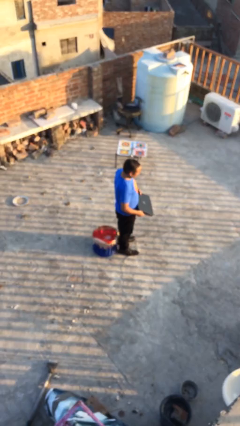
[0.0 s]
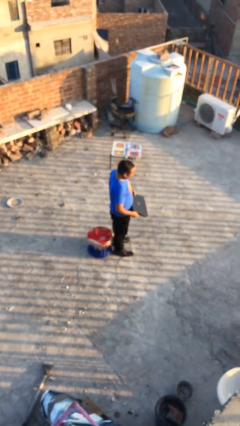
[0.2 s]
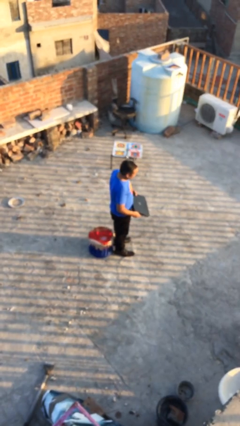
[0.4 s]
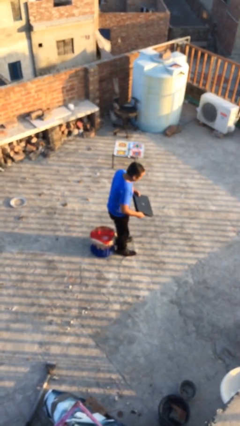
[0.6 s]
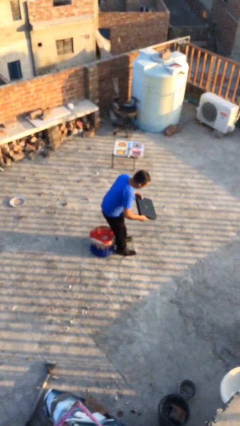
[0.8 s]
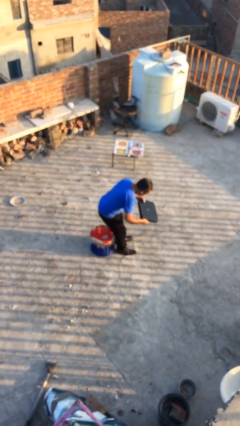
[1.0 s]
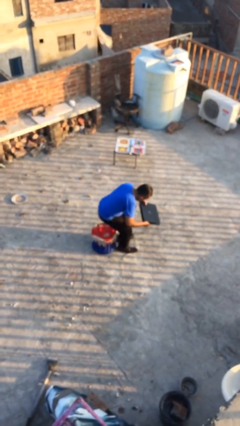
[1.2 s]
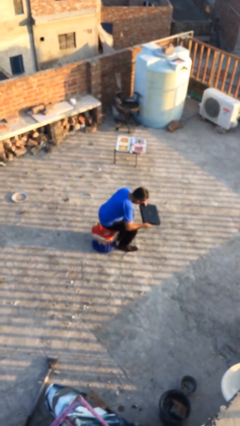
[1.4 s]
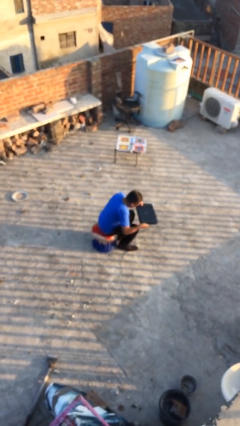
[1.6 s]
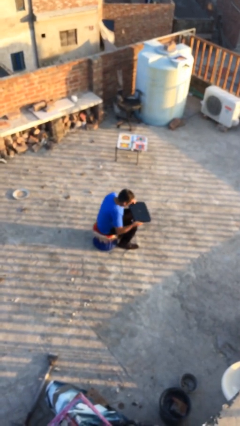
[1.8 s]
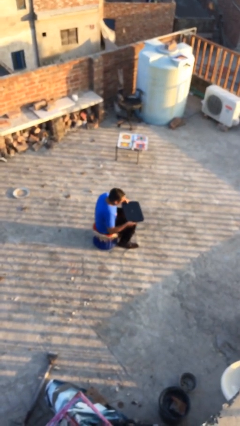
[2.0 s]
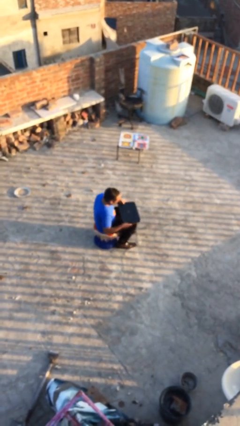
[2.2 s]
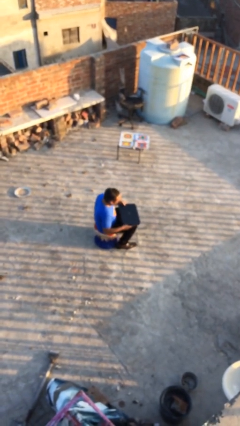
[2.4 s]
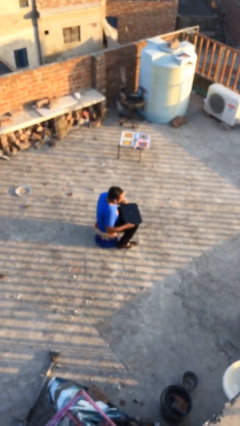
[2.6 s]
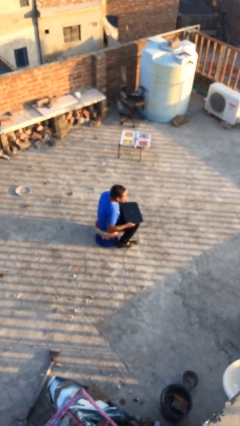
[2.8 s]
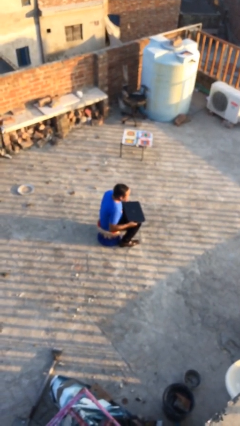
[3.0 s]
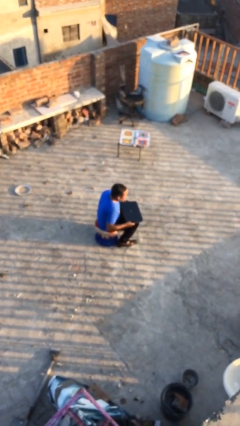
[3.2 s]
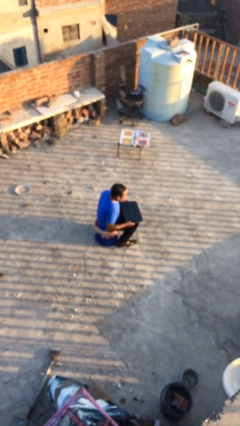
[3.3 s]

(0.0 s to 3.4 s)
person sits down

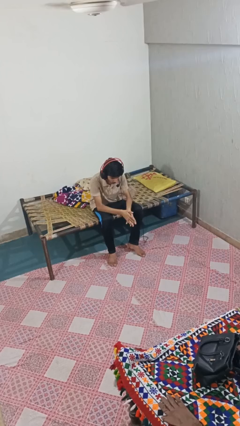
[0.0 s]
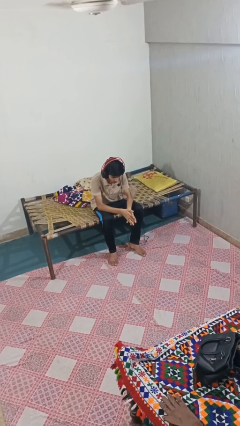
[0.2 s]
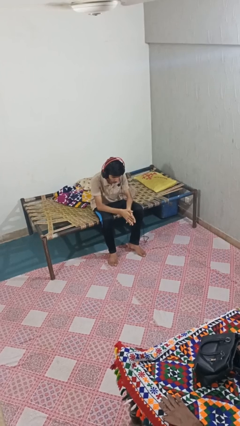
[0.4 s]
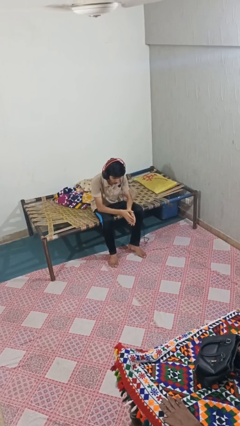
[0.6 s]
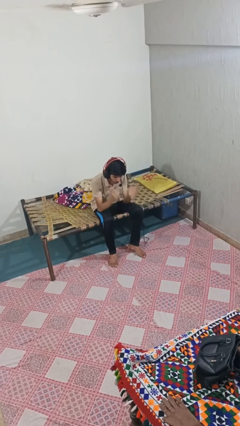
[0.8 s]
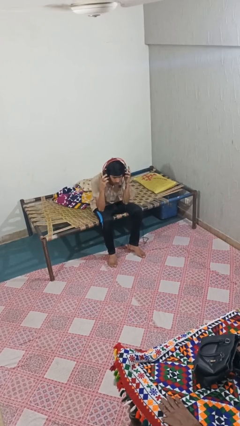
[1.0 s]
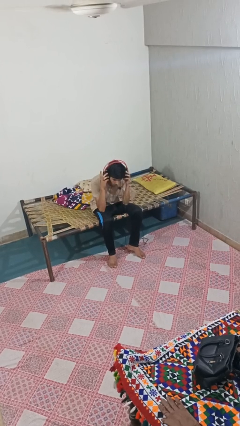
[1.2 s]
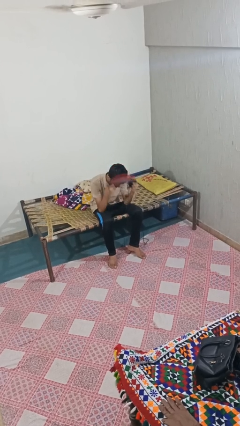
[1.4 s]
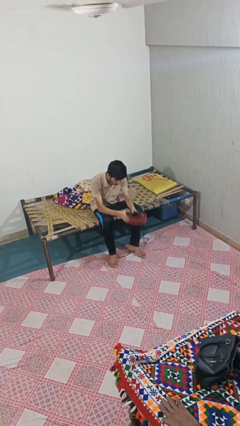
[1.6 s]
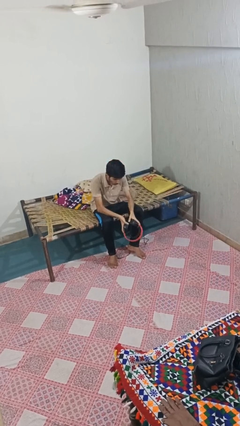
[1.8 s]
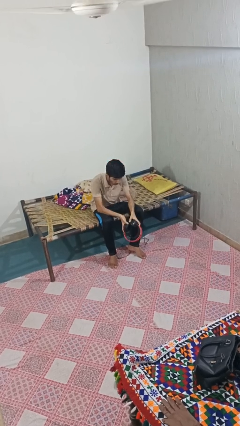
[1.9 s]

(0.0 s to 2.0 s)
person takes off headphones

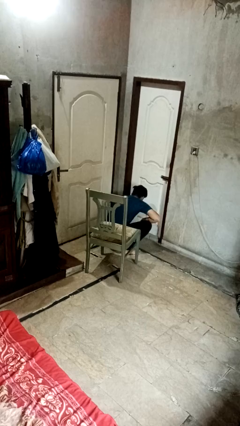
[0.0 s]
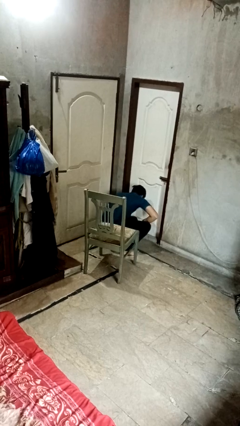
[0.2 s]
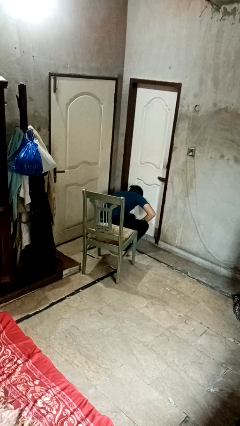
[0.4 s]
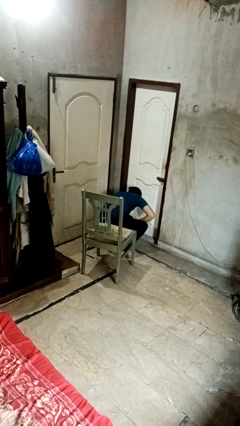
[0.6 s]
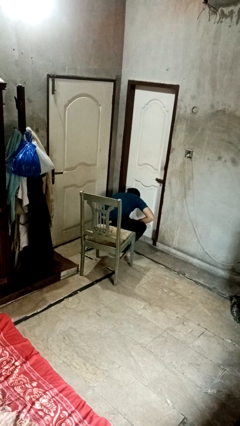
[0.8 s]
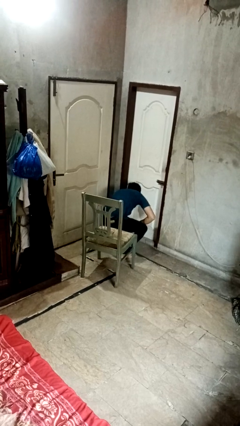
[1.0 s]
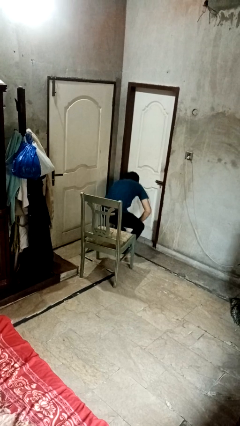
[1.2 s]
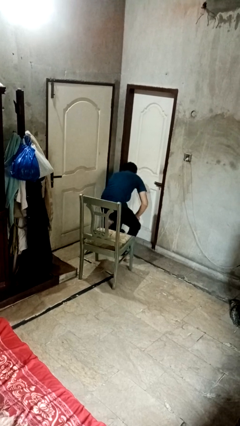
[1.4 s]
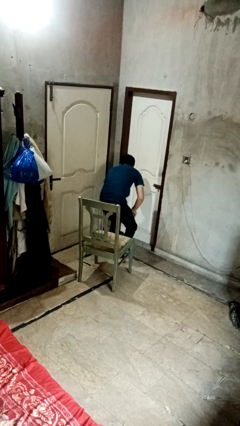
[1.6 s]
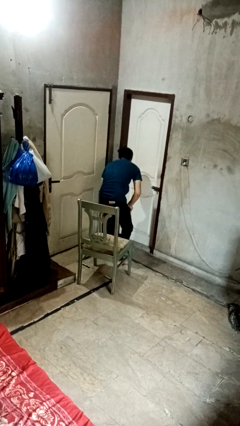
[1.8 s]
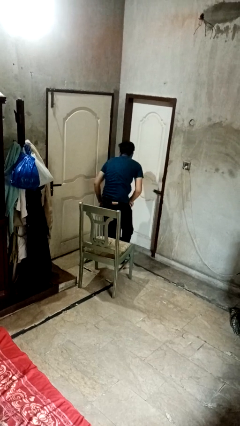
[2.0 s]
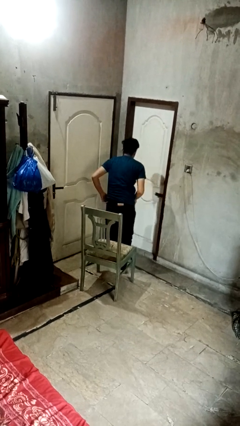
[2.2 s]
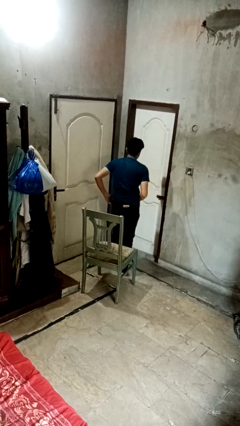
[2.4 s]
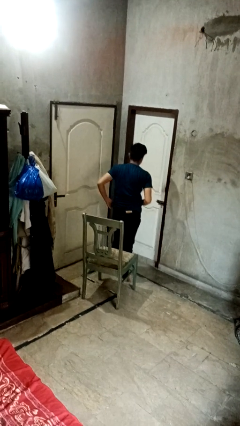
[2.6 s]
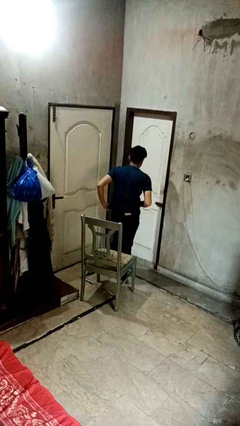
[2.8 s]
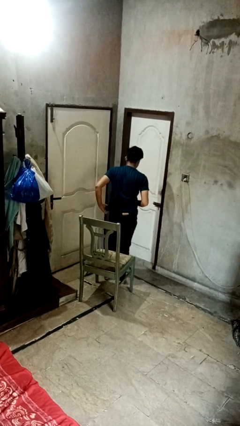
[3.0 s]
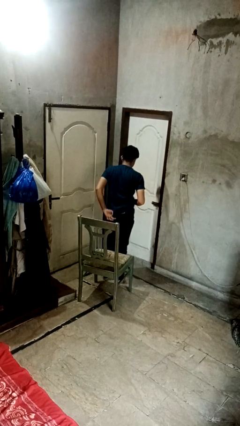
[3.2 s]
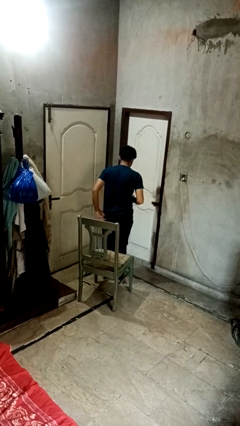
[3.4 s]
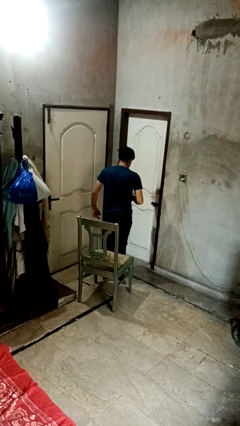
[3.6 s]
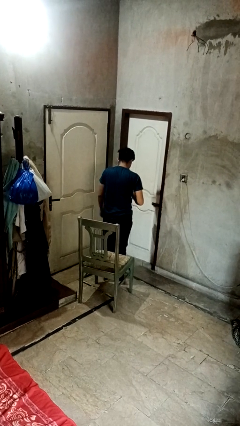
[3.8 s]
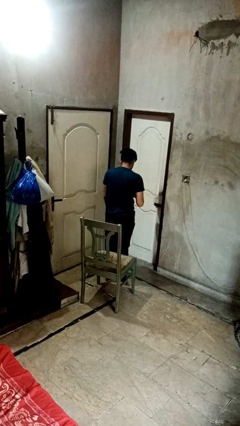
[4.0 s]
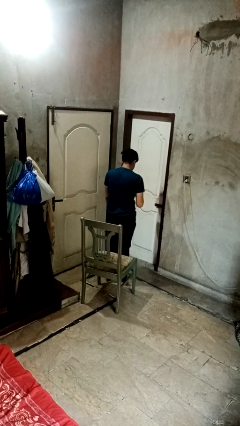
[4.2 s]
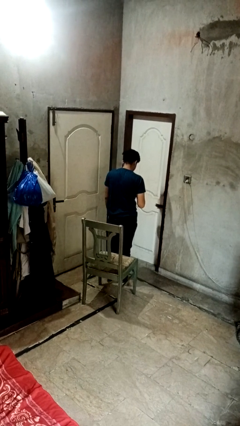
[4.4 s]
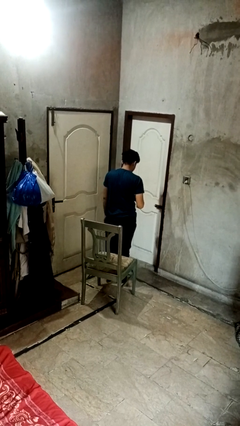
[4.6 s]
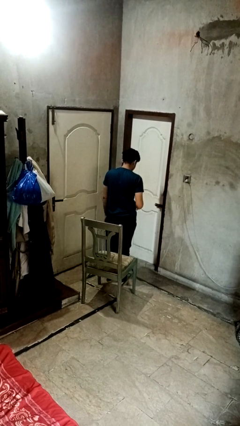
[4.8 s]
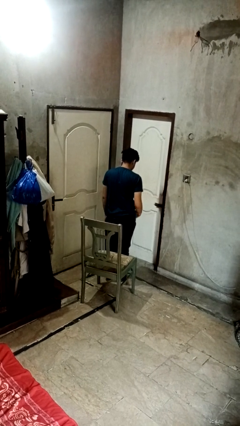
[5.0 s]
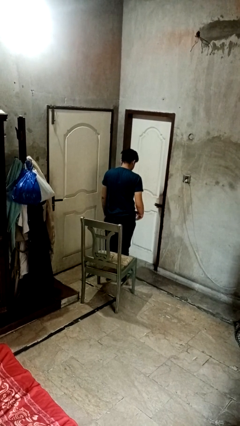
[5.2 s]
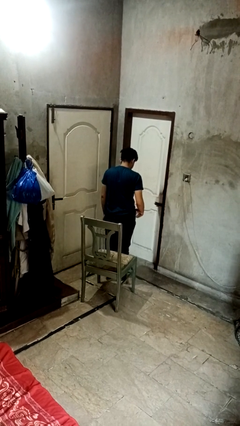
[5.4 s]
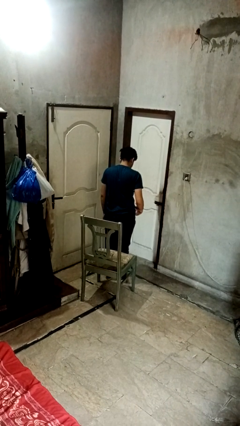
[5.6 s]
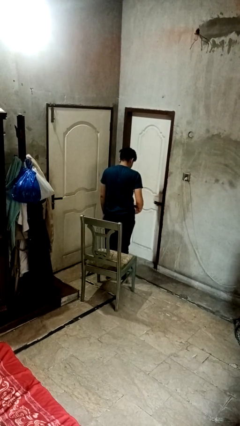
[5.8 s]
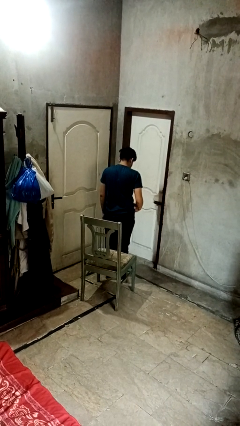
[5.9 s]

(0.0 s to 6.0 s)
person stands up from floor

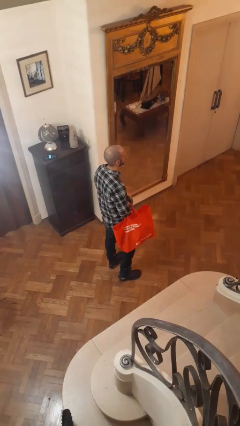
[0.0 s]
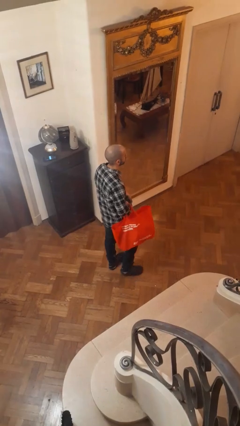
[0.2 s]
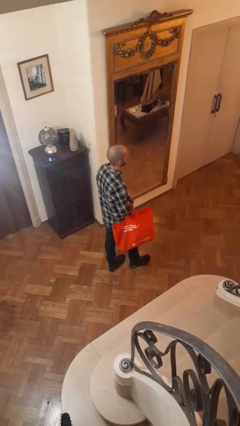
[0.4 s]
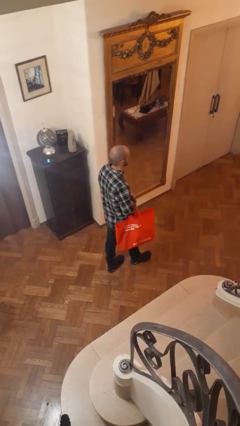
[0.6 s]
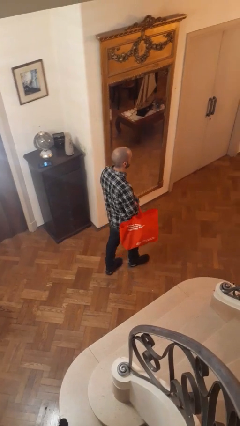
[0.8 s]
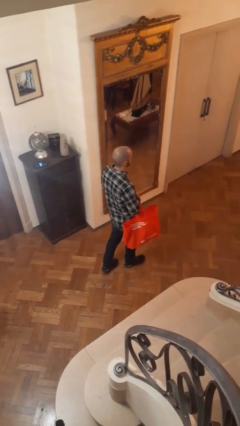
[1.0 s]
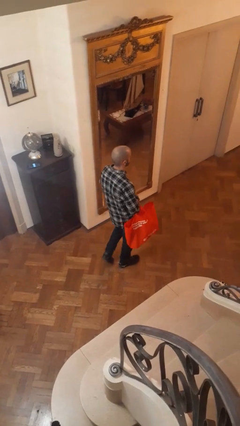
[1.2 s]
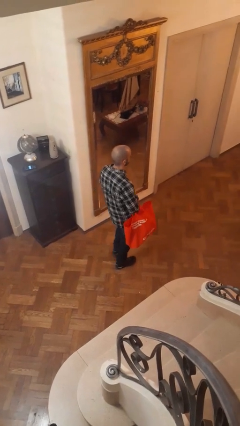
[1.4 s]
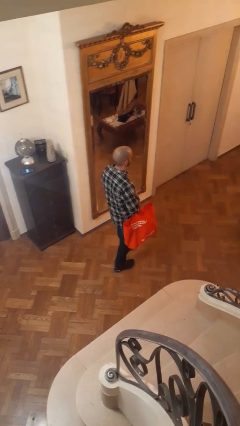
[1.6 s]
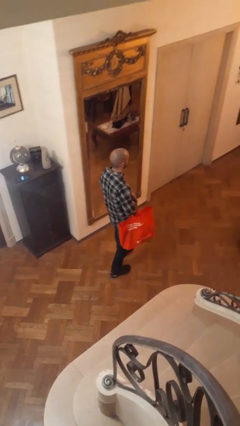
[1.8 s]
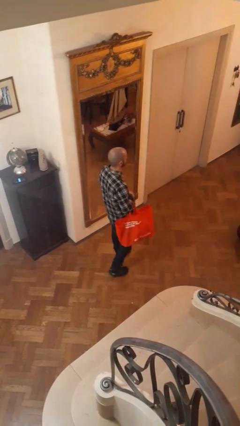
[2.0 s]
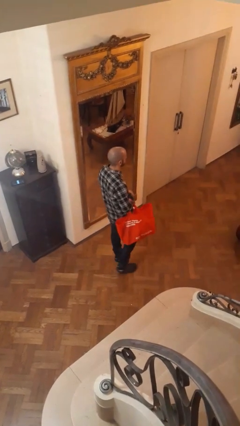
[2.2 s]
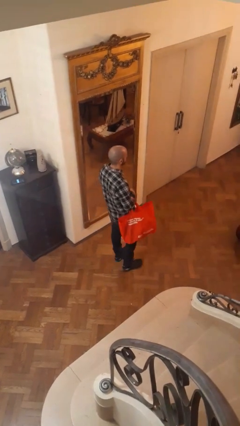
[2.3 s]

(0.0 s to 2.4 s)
person carries groceries

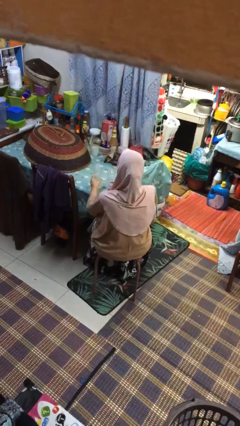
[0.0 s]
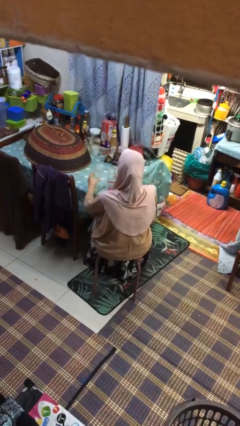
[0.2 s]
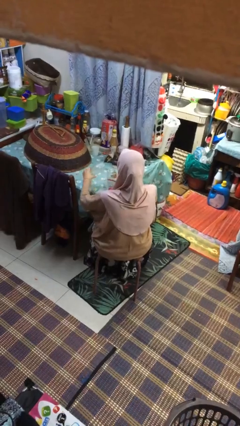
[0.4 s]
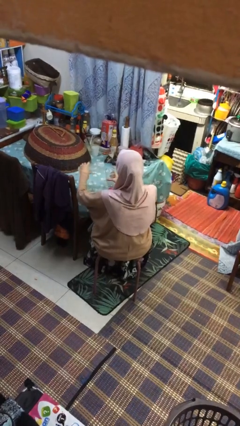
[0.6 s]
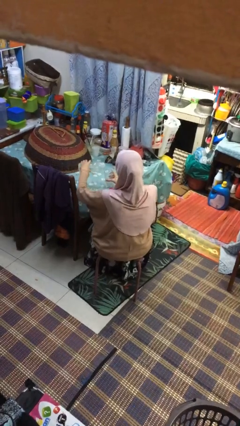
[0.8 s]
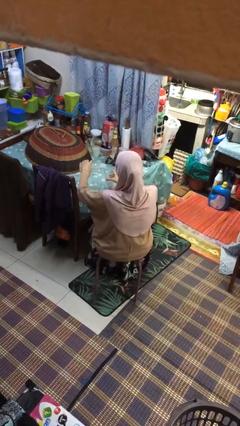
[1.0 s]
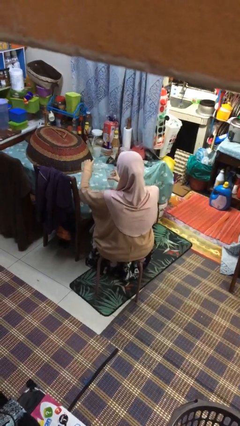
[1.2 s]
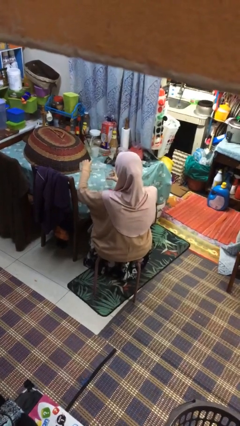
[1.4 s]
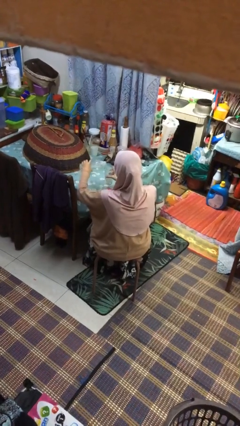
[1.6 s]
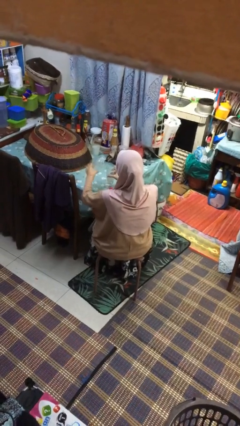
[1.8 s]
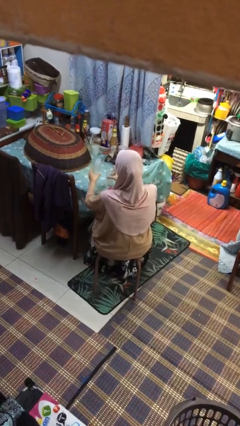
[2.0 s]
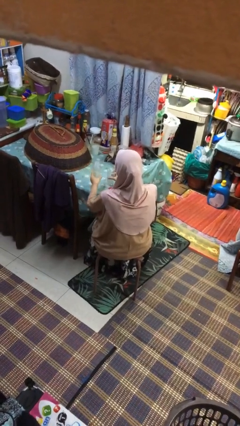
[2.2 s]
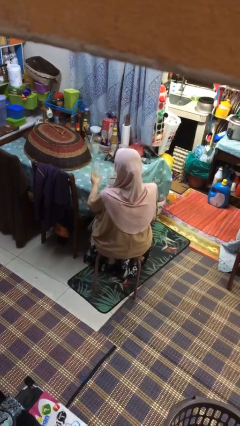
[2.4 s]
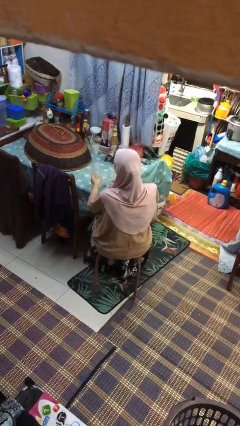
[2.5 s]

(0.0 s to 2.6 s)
person pours liquid into cup

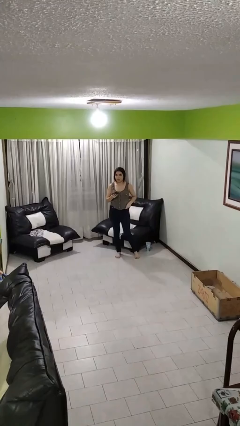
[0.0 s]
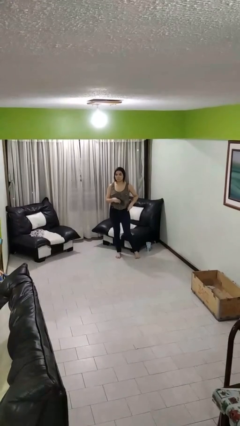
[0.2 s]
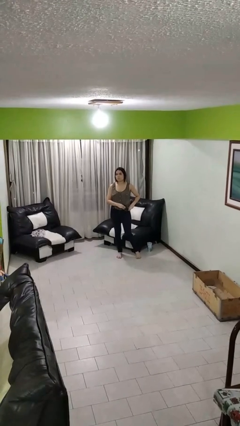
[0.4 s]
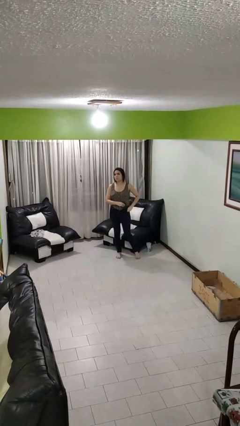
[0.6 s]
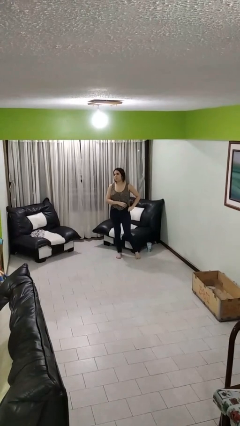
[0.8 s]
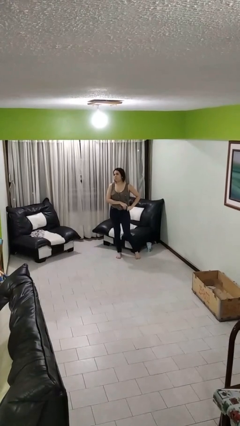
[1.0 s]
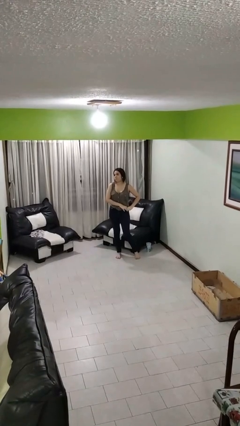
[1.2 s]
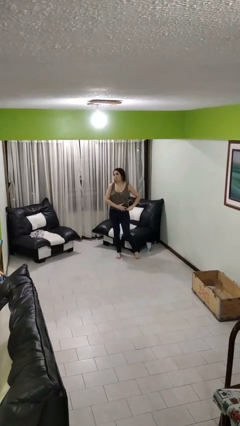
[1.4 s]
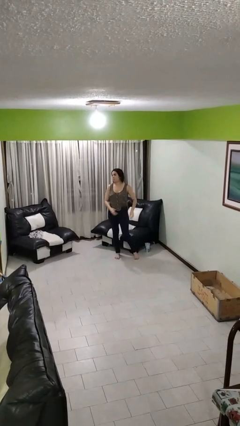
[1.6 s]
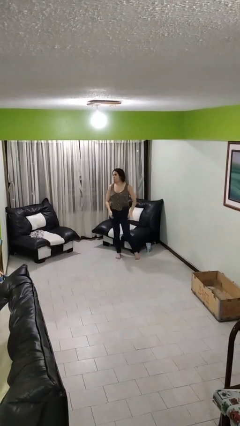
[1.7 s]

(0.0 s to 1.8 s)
person puts phone into pocket
